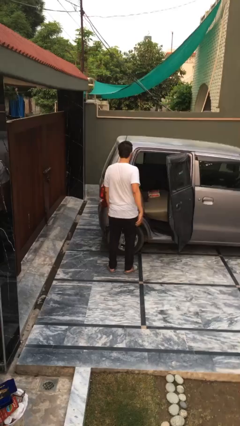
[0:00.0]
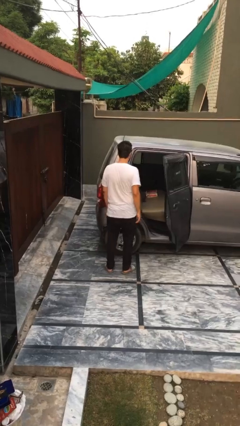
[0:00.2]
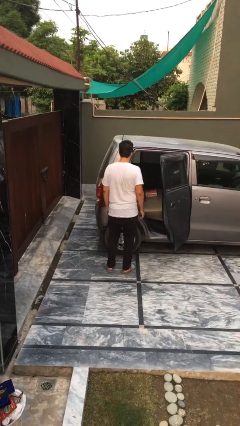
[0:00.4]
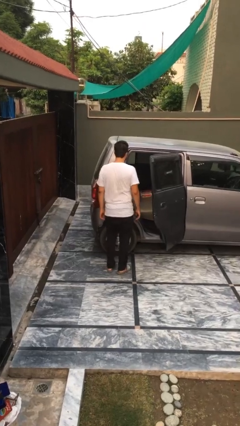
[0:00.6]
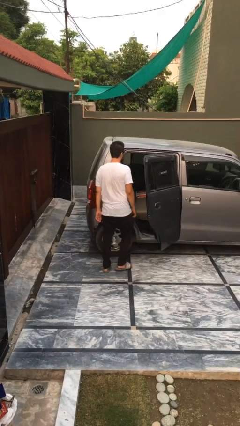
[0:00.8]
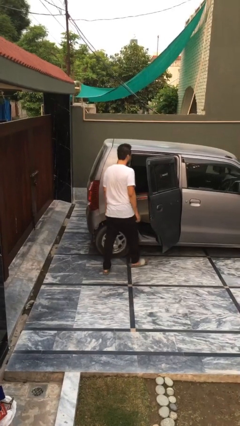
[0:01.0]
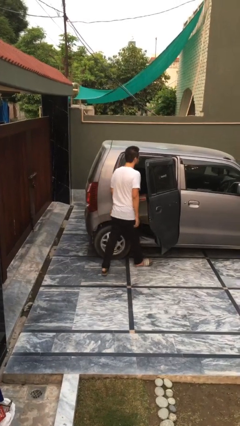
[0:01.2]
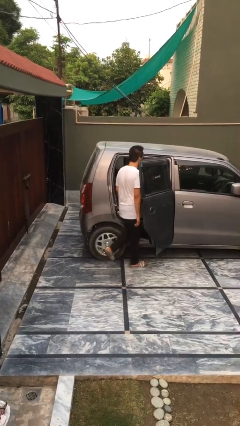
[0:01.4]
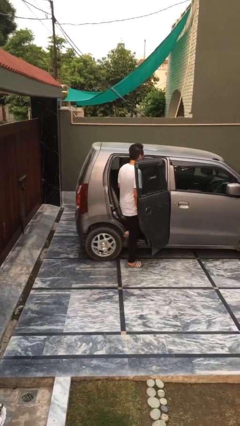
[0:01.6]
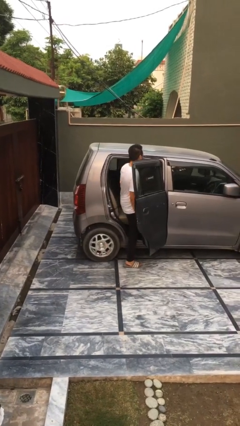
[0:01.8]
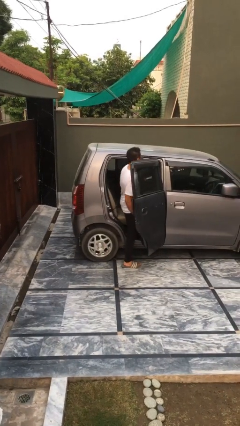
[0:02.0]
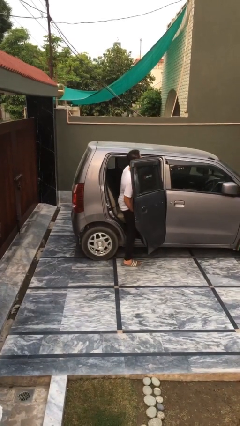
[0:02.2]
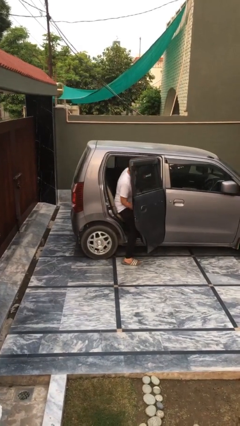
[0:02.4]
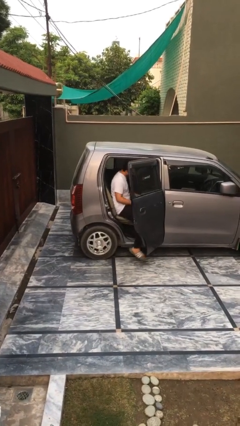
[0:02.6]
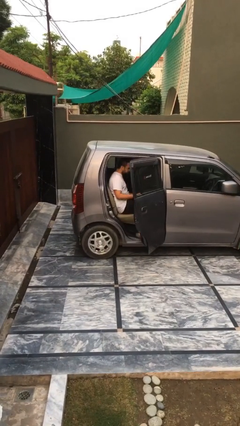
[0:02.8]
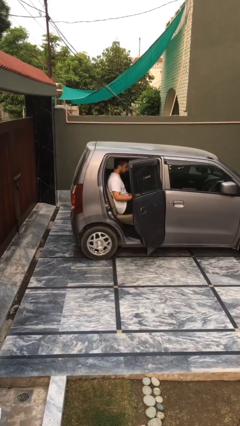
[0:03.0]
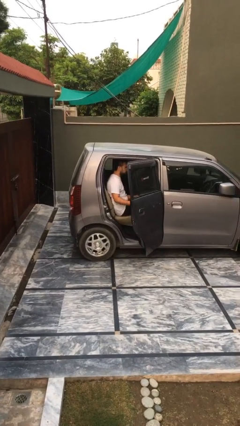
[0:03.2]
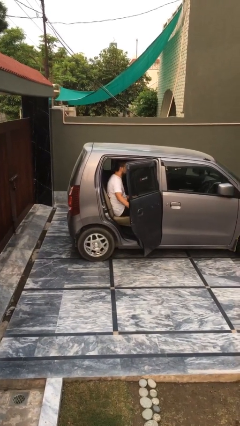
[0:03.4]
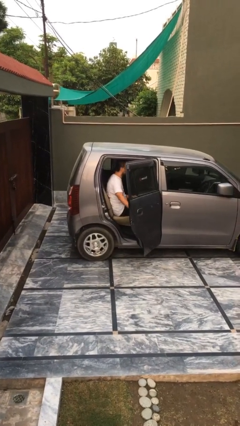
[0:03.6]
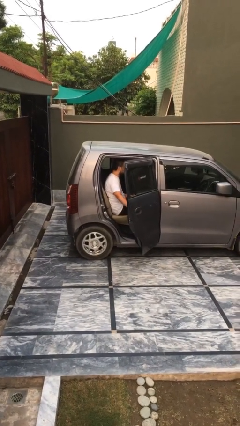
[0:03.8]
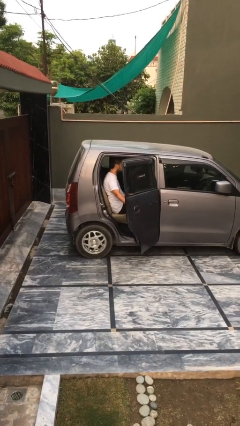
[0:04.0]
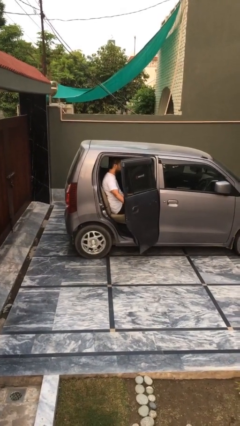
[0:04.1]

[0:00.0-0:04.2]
person enters car

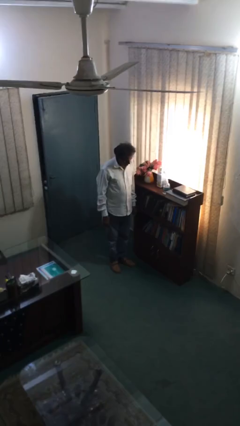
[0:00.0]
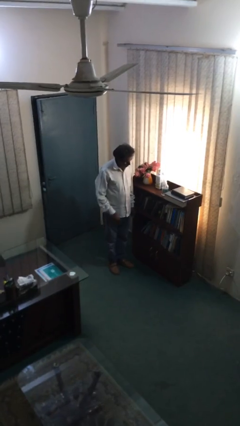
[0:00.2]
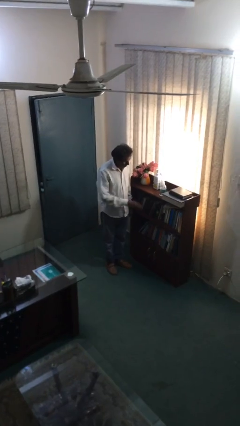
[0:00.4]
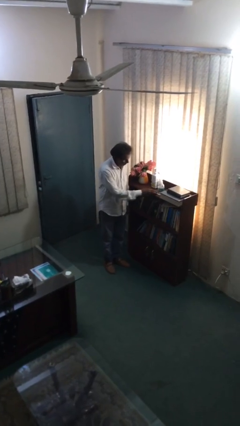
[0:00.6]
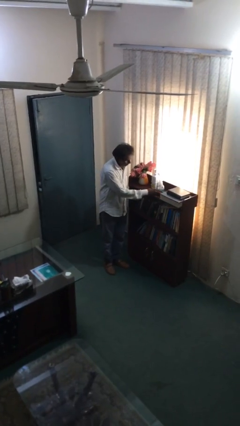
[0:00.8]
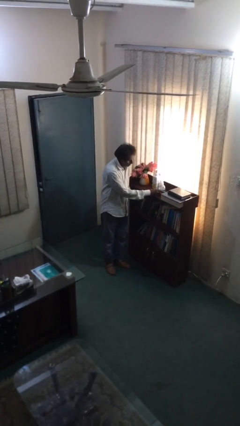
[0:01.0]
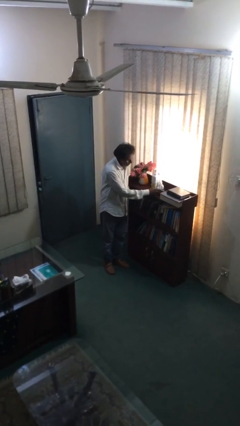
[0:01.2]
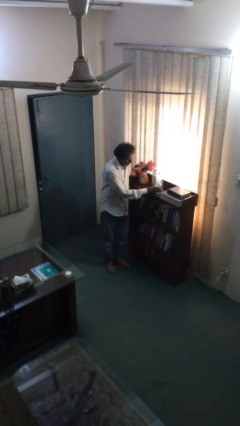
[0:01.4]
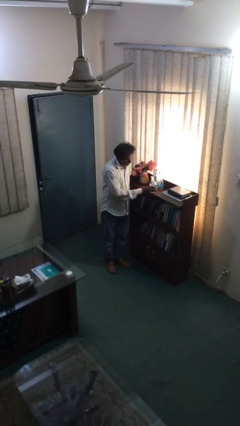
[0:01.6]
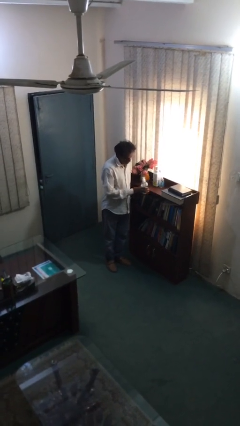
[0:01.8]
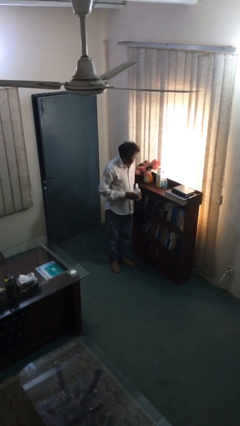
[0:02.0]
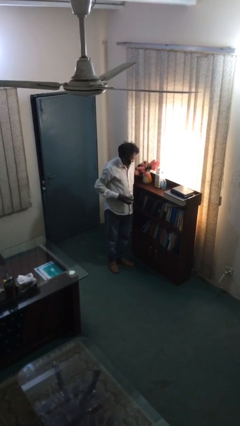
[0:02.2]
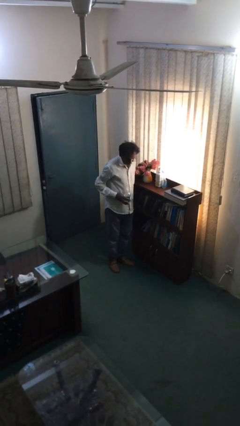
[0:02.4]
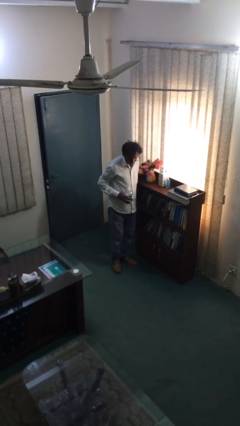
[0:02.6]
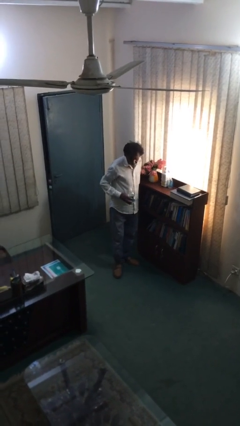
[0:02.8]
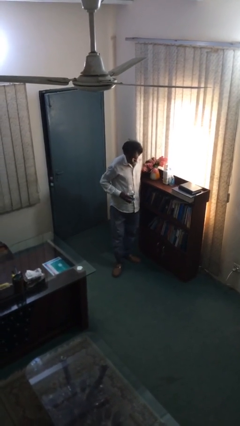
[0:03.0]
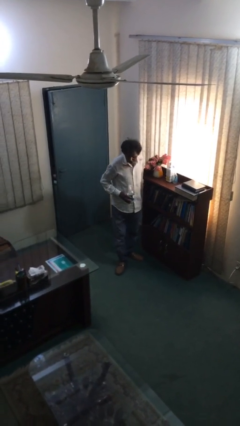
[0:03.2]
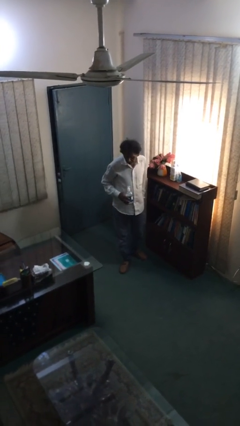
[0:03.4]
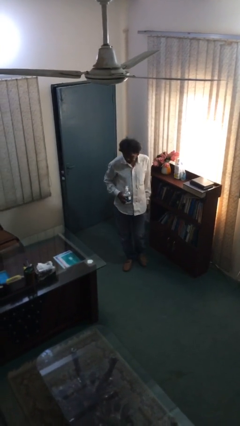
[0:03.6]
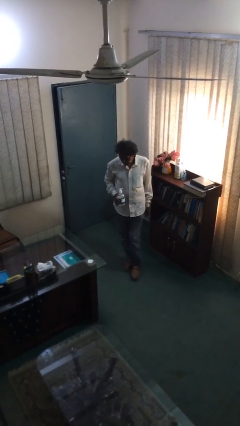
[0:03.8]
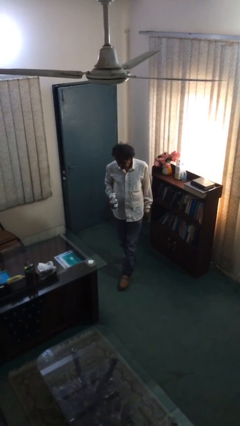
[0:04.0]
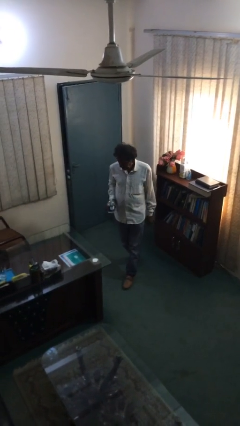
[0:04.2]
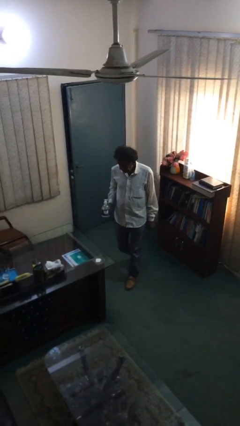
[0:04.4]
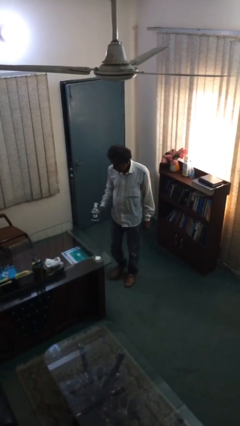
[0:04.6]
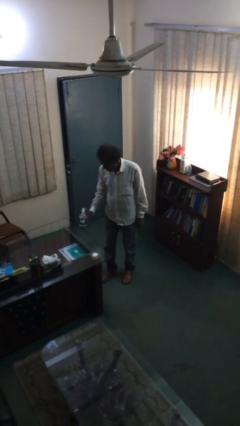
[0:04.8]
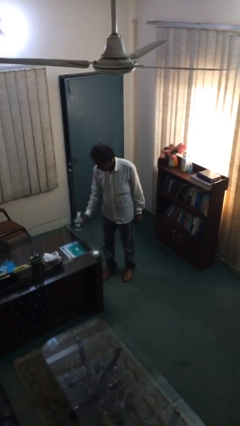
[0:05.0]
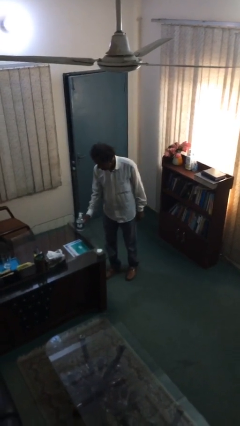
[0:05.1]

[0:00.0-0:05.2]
person picks up object from shelf

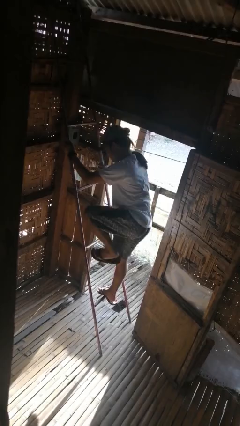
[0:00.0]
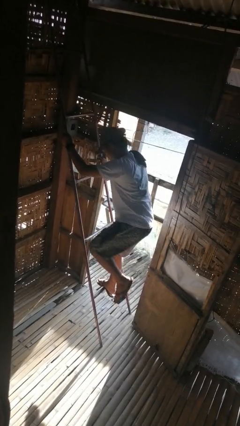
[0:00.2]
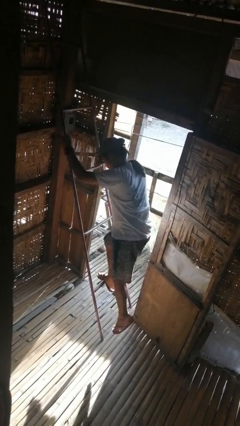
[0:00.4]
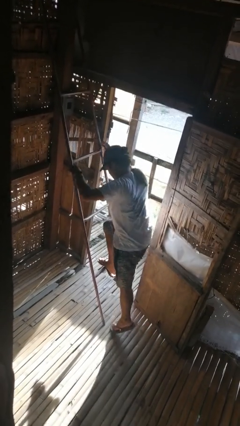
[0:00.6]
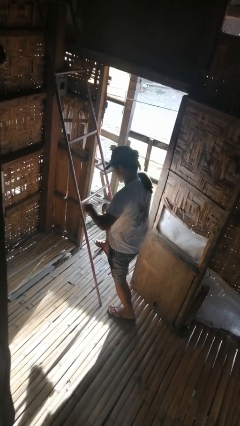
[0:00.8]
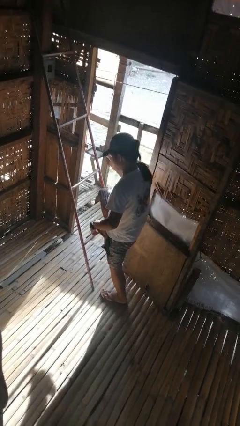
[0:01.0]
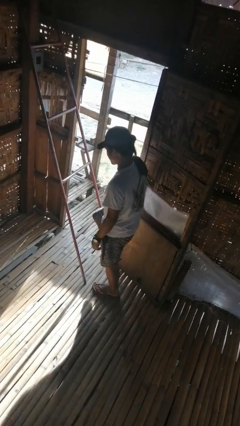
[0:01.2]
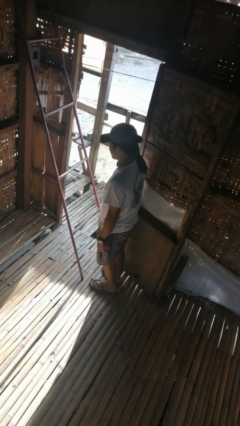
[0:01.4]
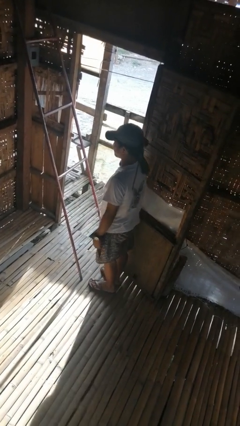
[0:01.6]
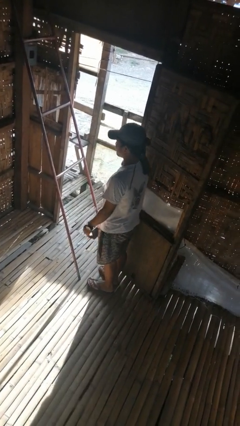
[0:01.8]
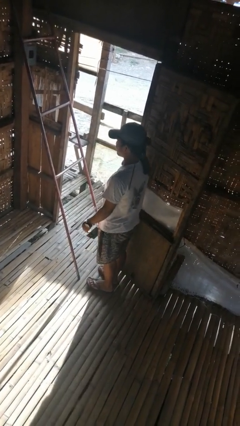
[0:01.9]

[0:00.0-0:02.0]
person climbs down ladder

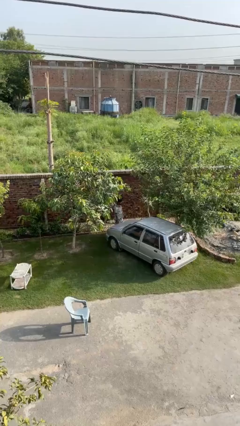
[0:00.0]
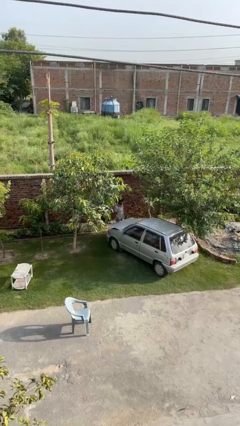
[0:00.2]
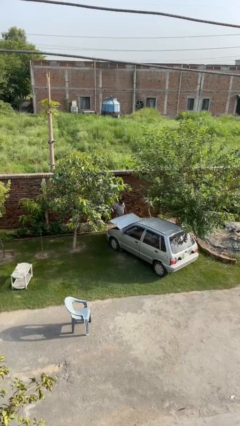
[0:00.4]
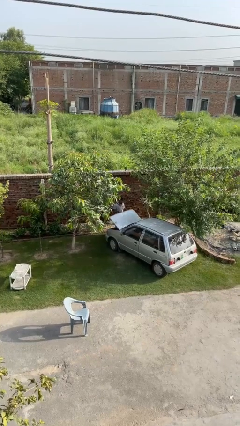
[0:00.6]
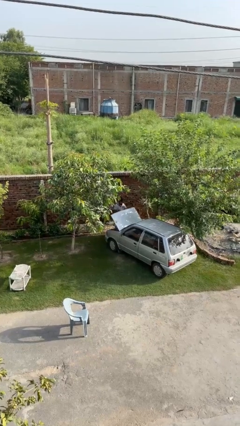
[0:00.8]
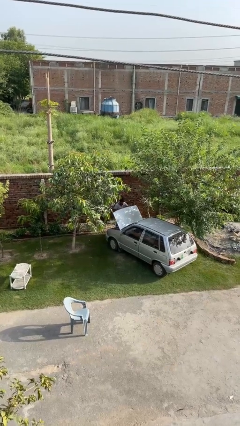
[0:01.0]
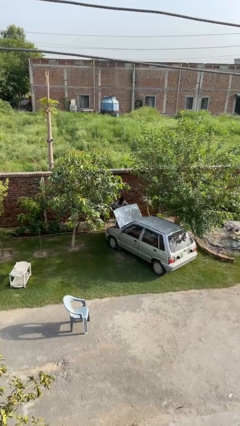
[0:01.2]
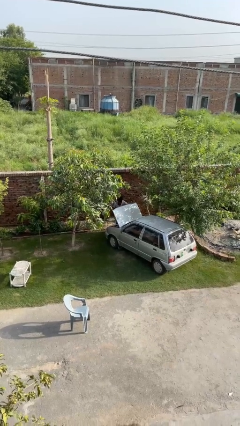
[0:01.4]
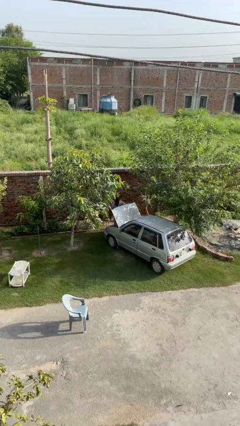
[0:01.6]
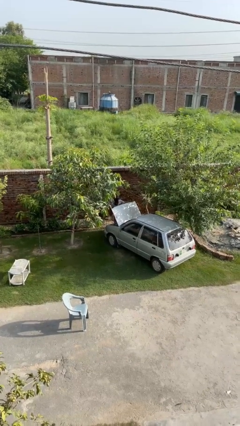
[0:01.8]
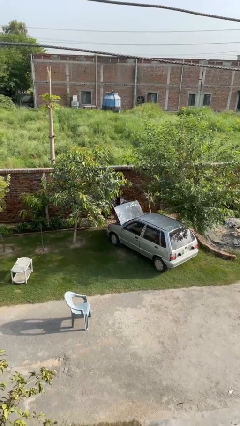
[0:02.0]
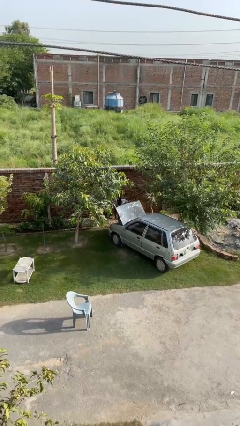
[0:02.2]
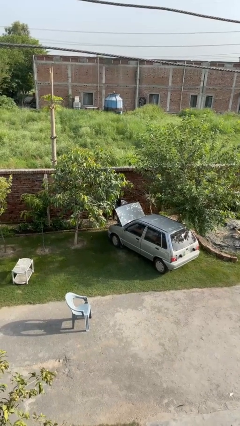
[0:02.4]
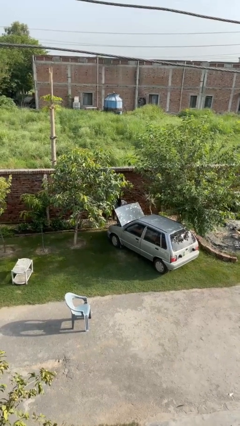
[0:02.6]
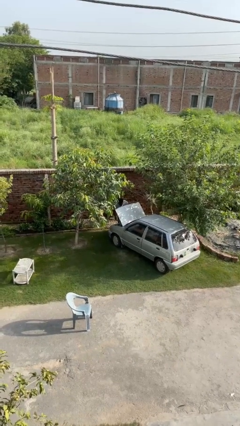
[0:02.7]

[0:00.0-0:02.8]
person opens car hood

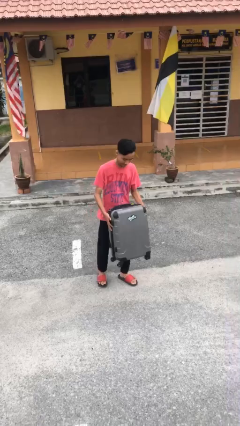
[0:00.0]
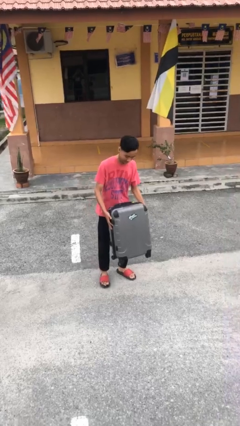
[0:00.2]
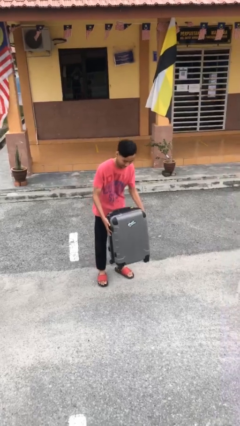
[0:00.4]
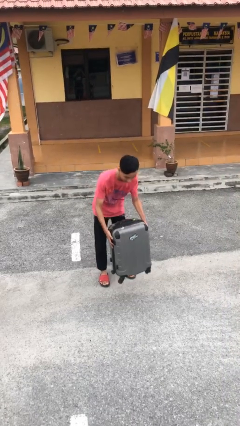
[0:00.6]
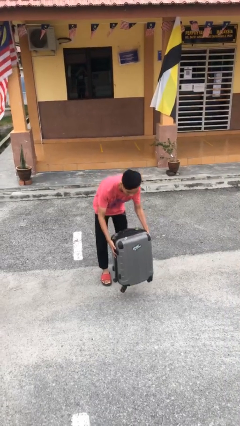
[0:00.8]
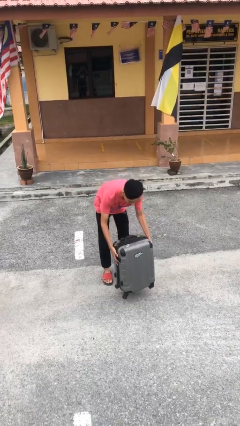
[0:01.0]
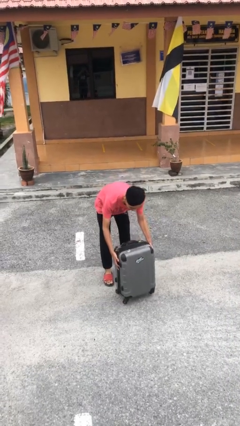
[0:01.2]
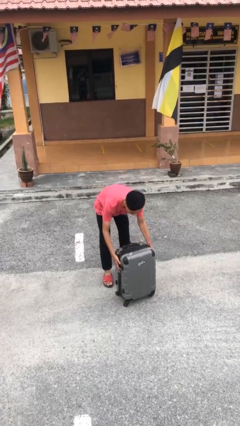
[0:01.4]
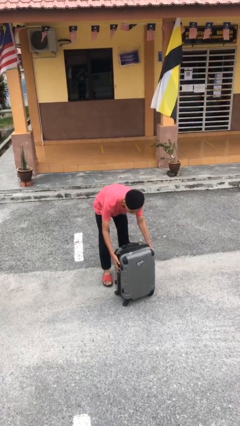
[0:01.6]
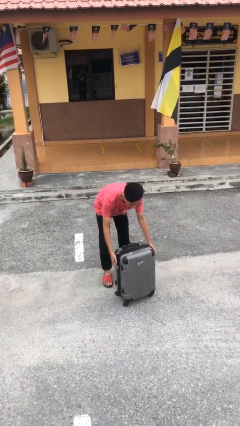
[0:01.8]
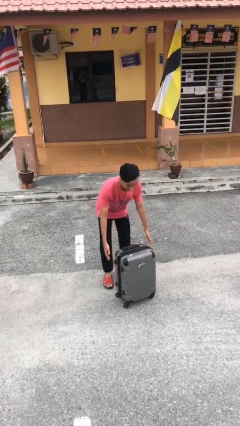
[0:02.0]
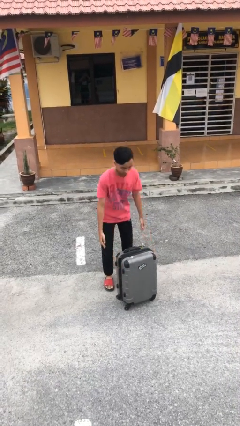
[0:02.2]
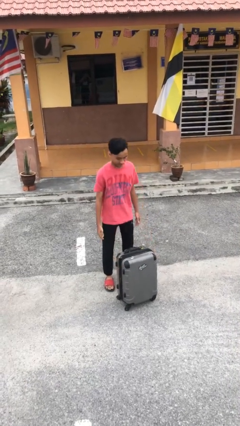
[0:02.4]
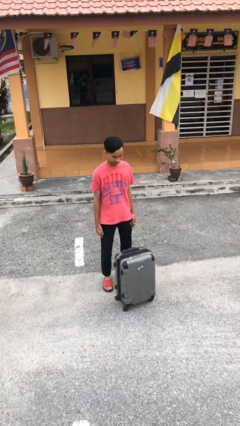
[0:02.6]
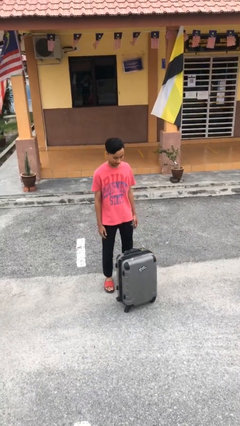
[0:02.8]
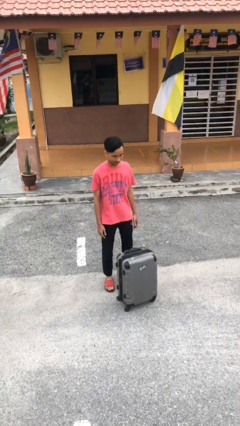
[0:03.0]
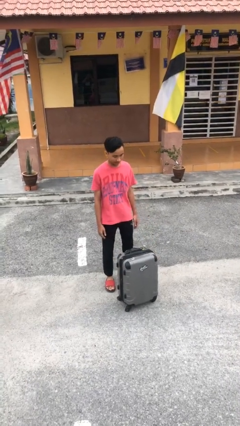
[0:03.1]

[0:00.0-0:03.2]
person puts down object on floor
